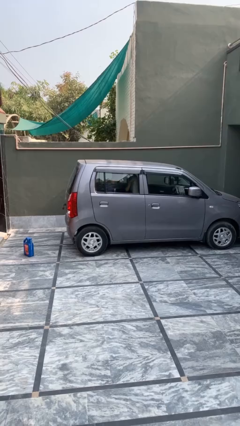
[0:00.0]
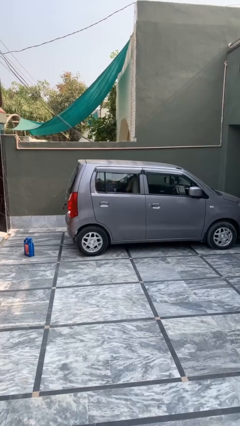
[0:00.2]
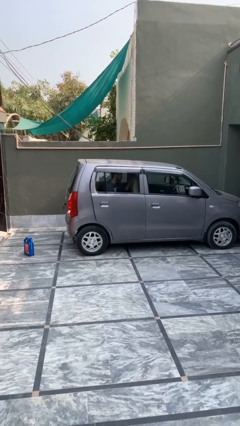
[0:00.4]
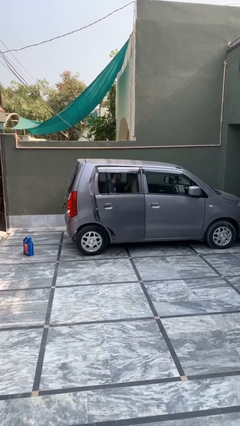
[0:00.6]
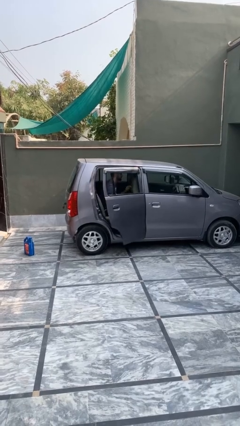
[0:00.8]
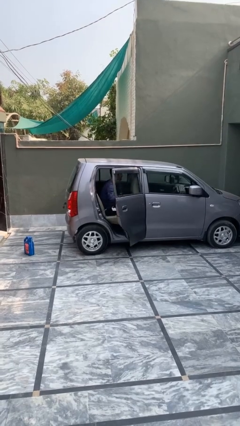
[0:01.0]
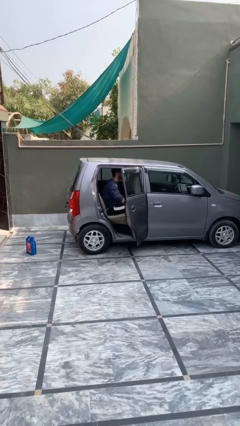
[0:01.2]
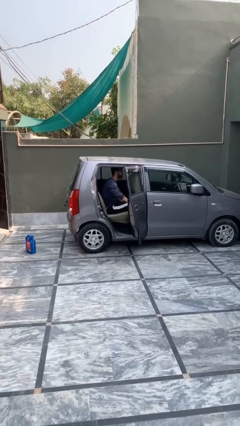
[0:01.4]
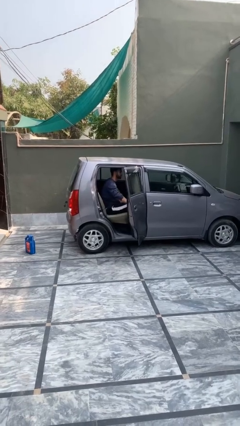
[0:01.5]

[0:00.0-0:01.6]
person opens car door

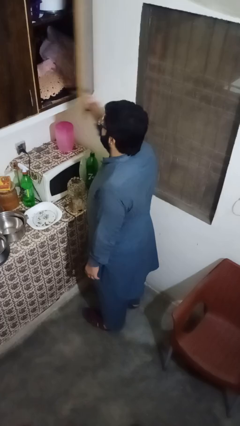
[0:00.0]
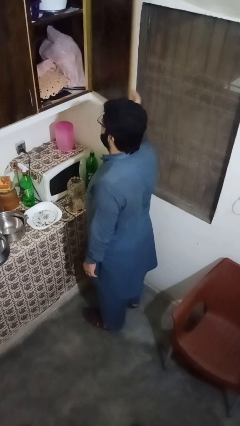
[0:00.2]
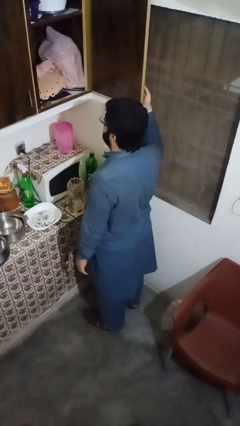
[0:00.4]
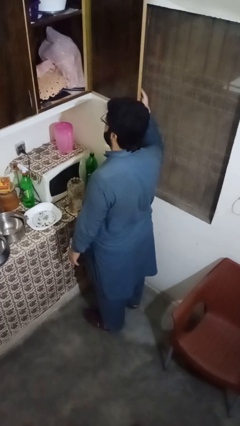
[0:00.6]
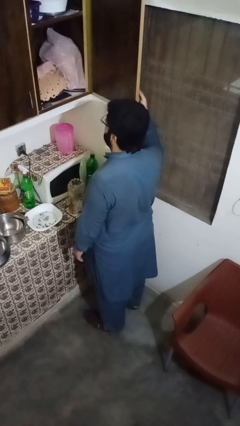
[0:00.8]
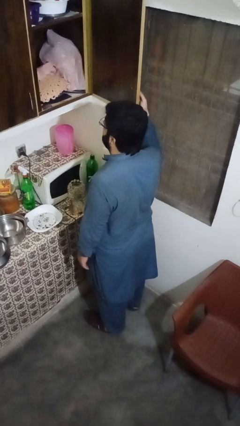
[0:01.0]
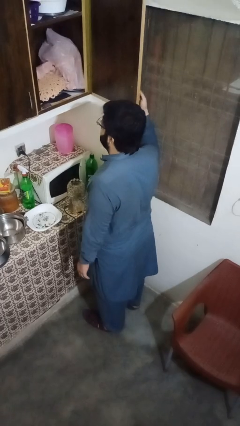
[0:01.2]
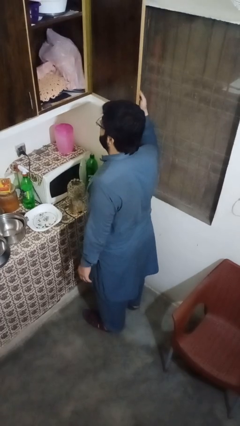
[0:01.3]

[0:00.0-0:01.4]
person closes cabinet

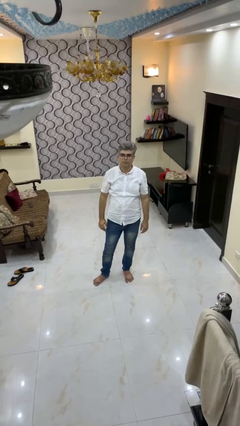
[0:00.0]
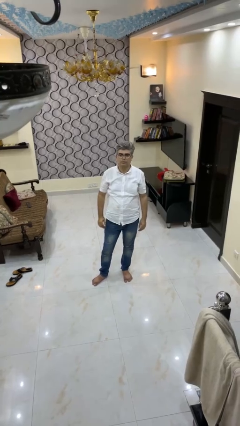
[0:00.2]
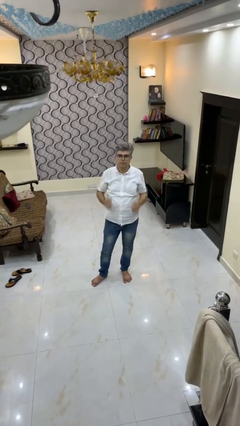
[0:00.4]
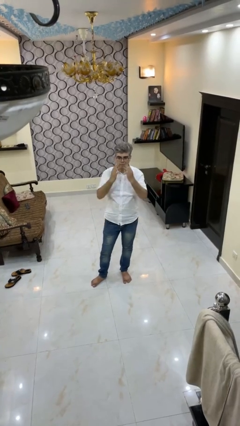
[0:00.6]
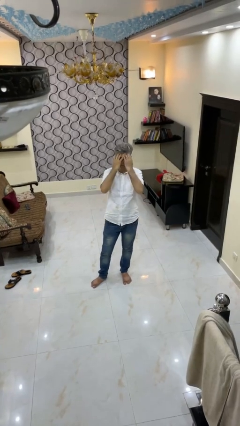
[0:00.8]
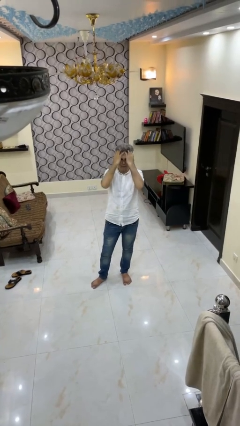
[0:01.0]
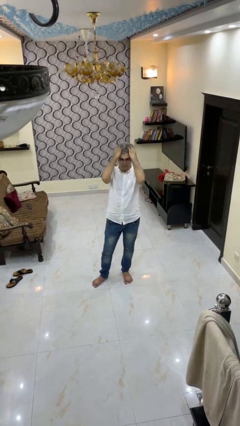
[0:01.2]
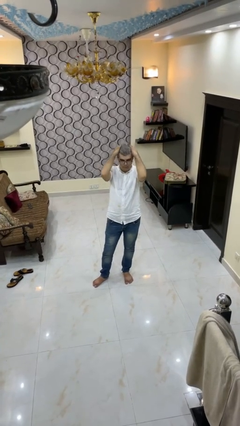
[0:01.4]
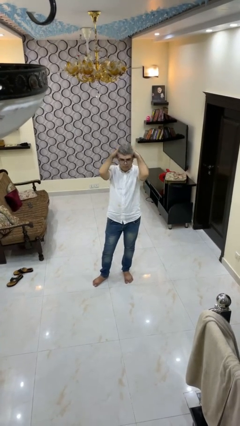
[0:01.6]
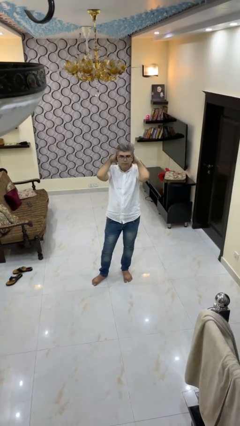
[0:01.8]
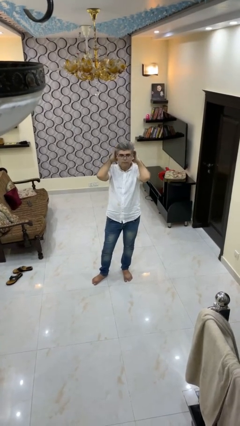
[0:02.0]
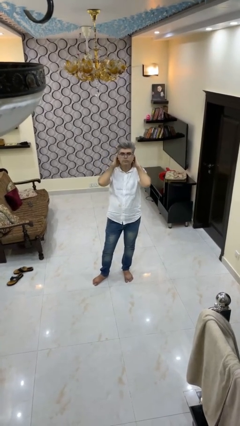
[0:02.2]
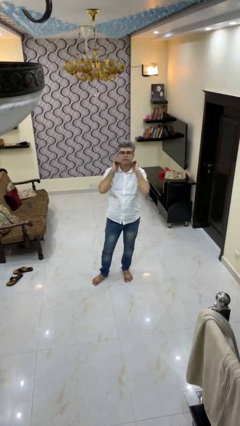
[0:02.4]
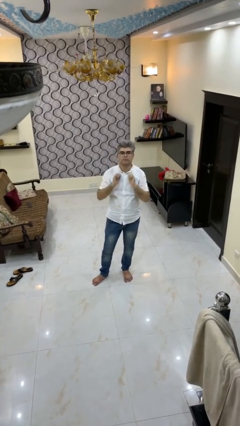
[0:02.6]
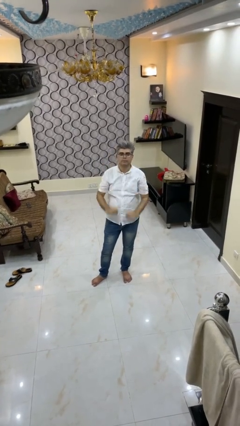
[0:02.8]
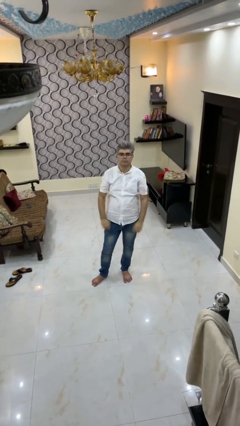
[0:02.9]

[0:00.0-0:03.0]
person strokes hair

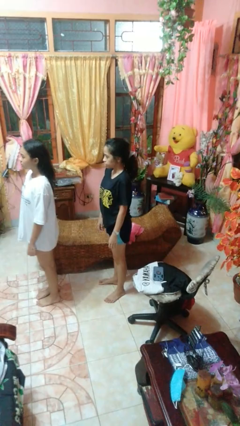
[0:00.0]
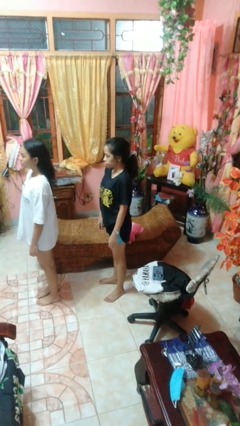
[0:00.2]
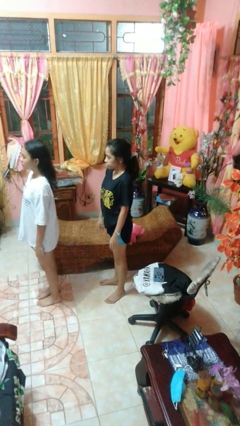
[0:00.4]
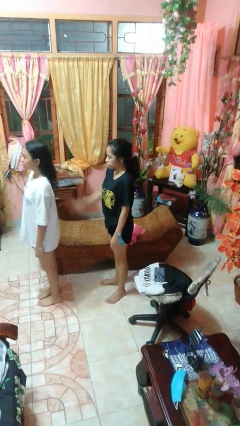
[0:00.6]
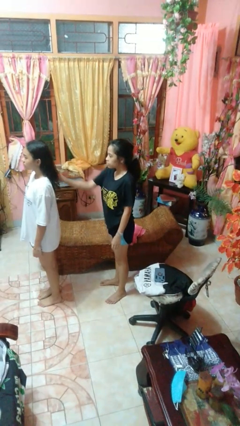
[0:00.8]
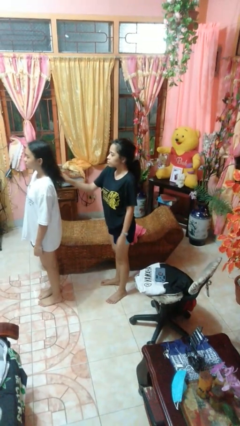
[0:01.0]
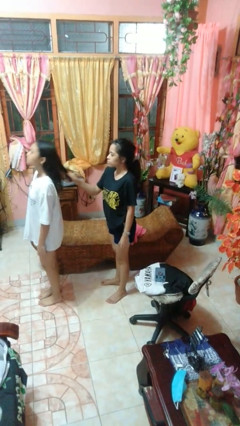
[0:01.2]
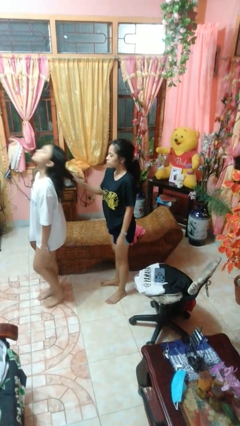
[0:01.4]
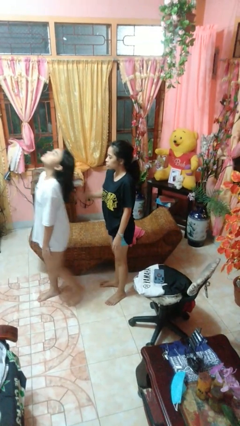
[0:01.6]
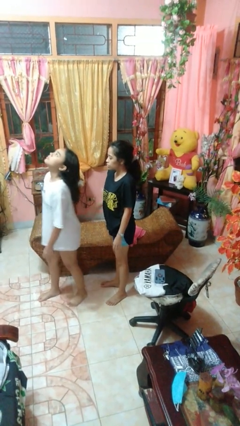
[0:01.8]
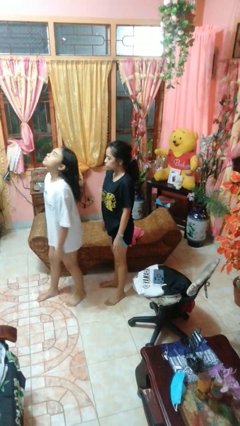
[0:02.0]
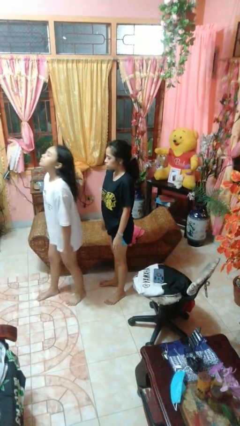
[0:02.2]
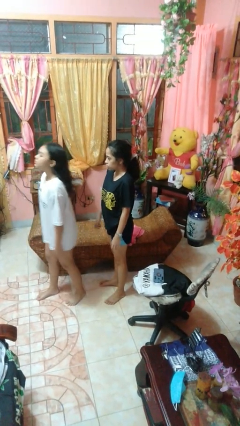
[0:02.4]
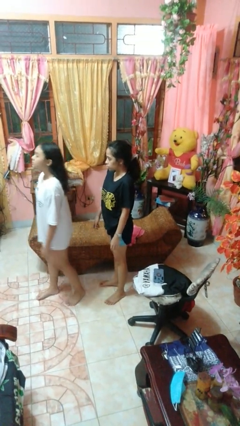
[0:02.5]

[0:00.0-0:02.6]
person grabs person by hair

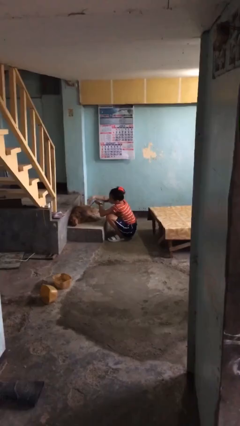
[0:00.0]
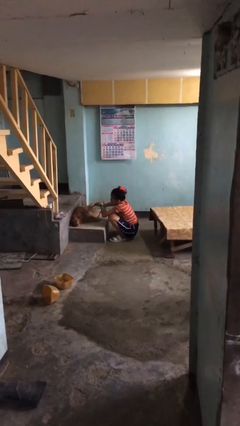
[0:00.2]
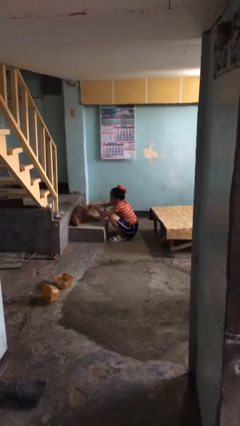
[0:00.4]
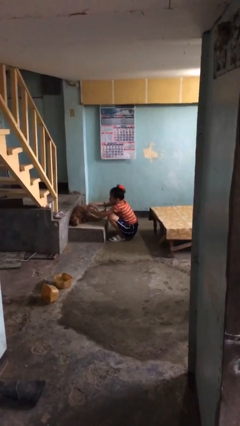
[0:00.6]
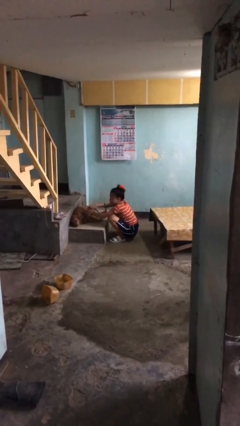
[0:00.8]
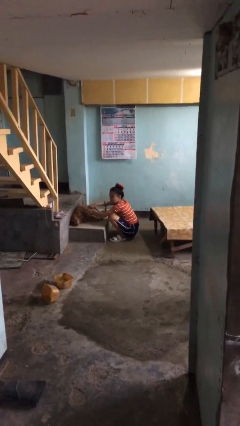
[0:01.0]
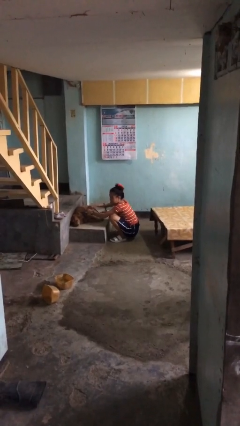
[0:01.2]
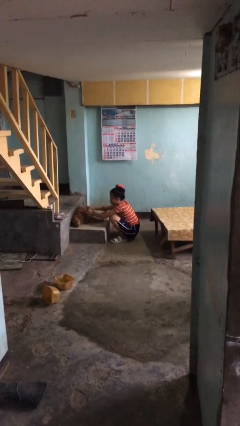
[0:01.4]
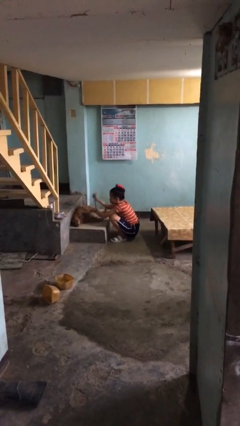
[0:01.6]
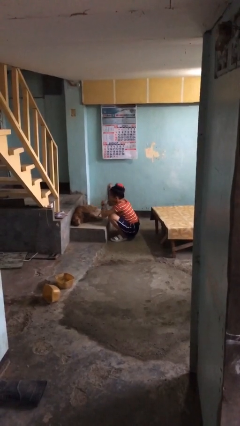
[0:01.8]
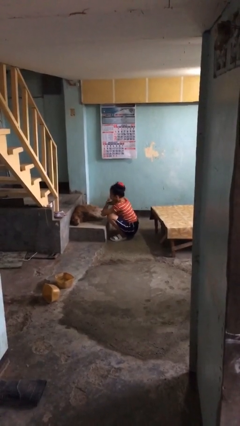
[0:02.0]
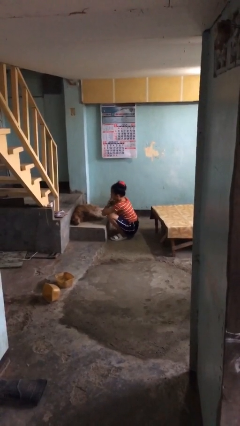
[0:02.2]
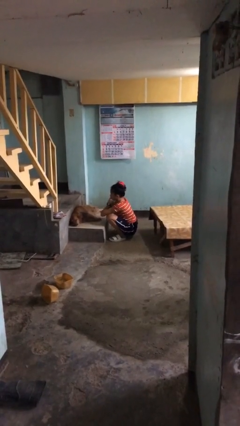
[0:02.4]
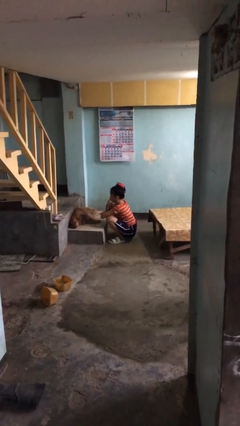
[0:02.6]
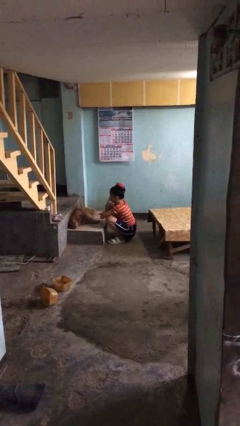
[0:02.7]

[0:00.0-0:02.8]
person unattaches leash from dog

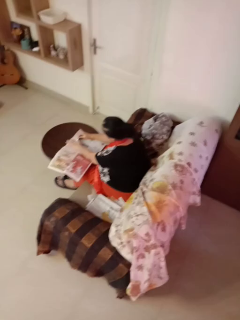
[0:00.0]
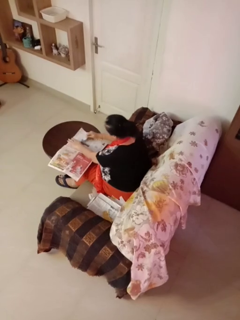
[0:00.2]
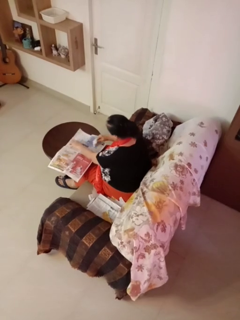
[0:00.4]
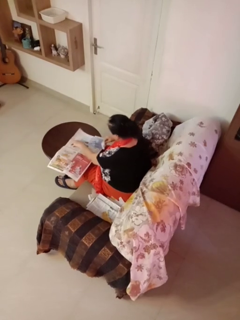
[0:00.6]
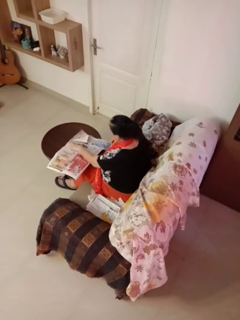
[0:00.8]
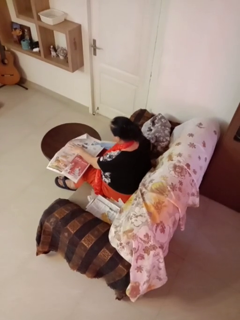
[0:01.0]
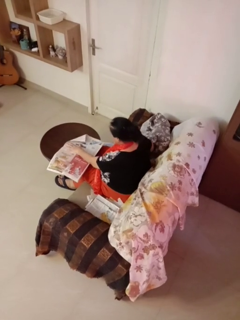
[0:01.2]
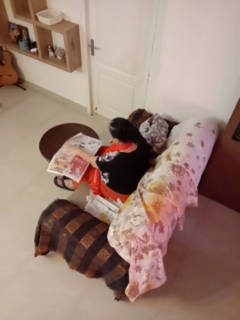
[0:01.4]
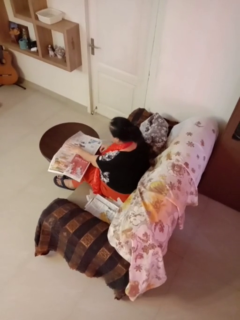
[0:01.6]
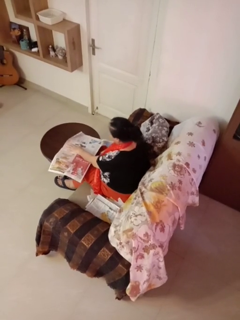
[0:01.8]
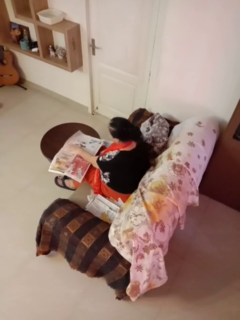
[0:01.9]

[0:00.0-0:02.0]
person tears paper

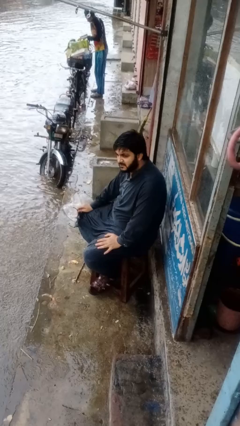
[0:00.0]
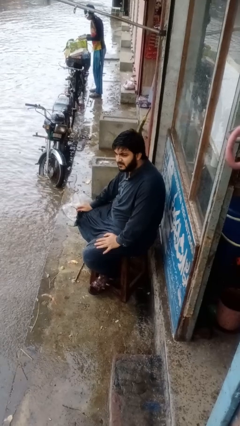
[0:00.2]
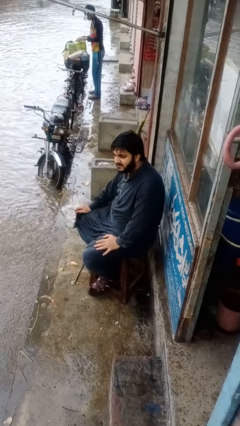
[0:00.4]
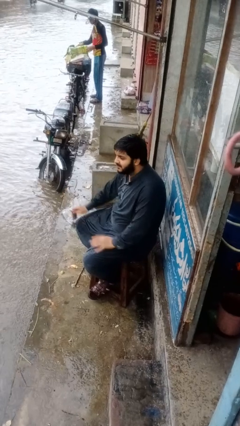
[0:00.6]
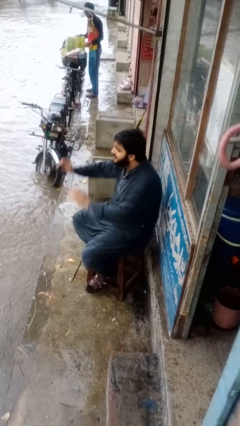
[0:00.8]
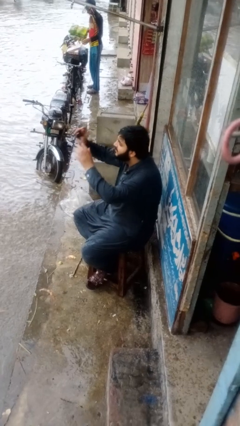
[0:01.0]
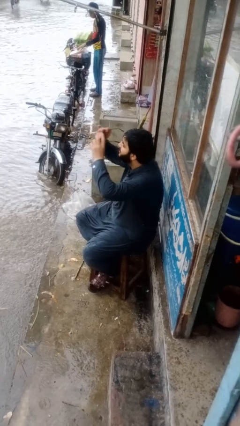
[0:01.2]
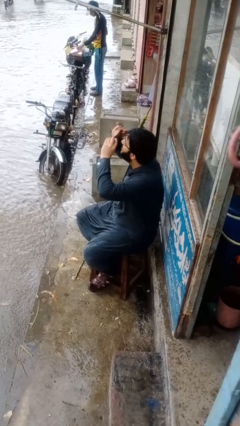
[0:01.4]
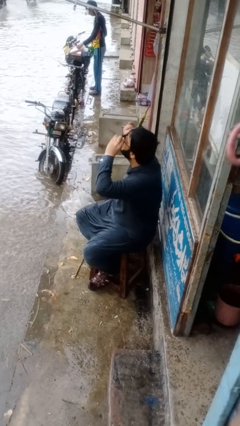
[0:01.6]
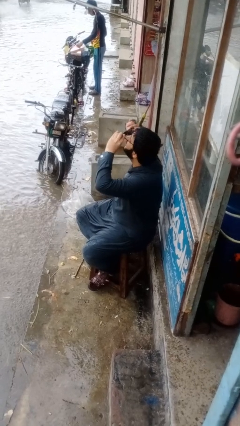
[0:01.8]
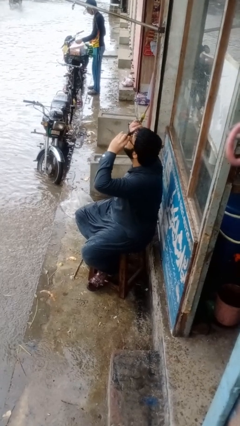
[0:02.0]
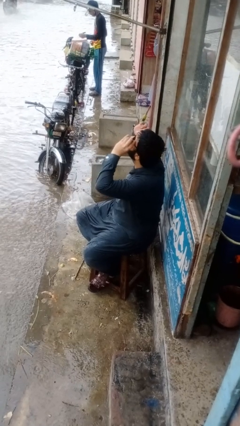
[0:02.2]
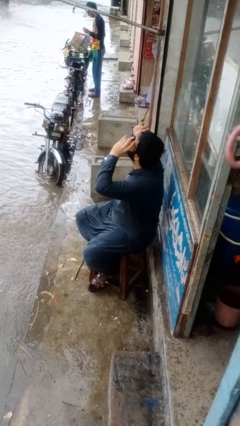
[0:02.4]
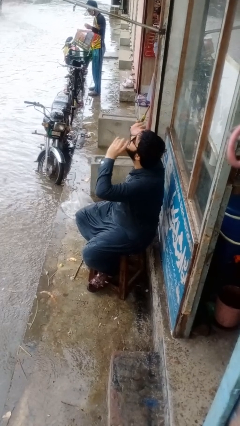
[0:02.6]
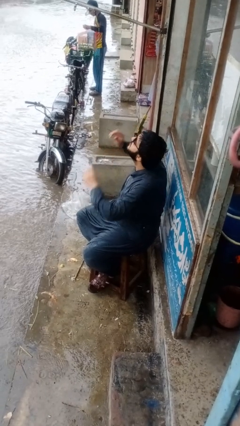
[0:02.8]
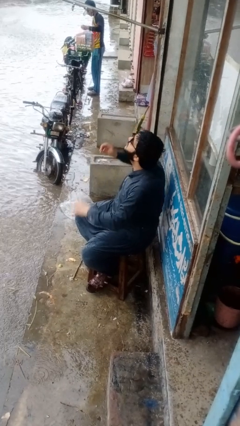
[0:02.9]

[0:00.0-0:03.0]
person puts on glasses

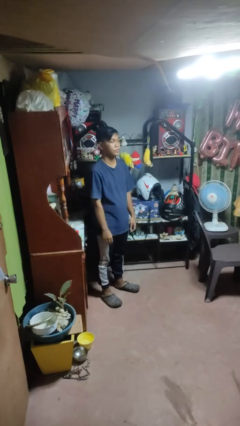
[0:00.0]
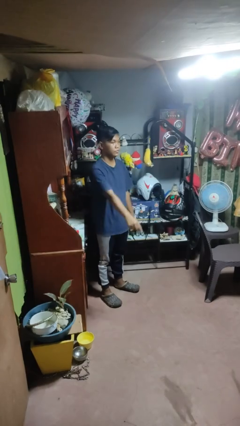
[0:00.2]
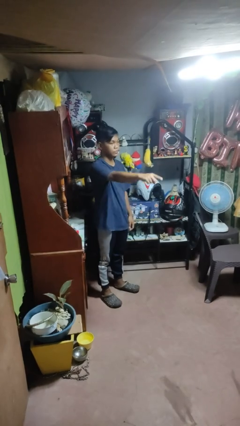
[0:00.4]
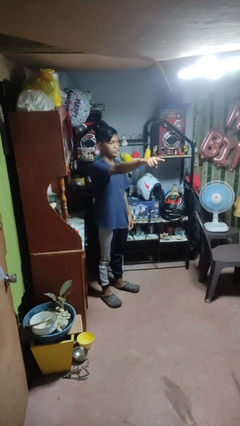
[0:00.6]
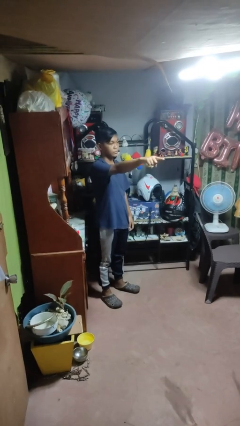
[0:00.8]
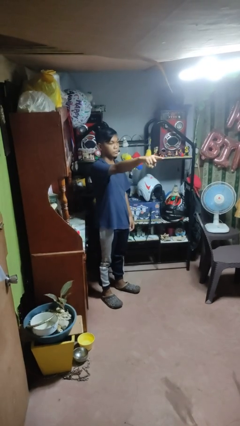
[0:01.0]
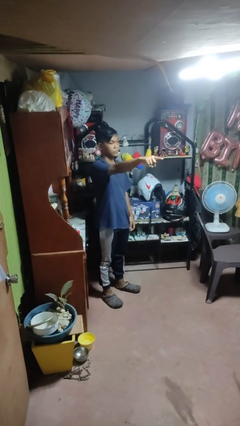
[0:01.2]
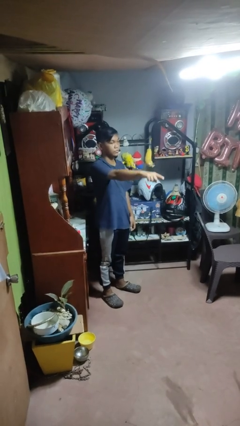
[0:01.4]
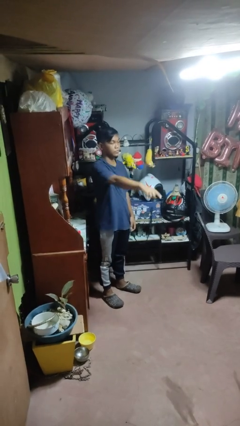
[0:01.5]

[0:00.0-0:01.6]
person points at person
